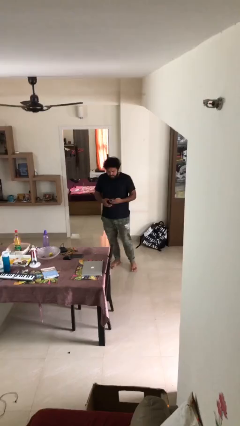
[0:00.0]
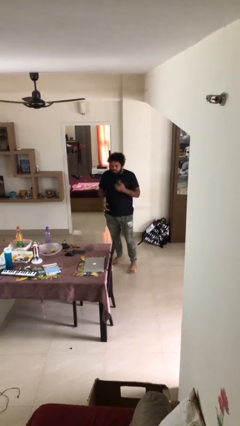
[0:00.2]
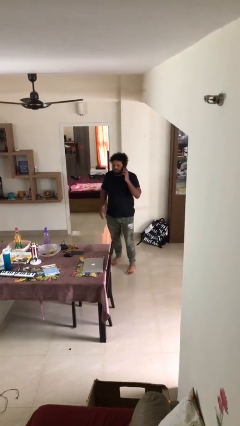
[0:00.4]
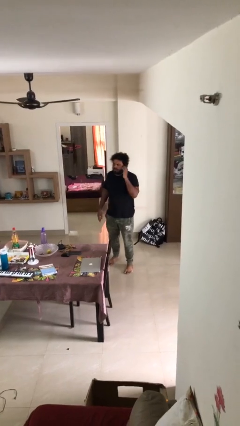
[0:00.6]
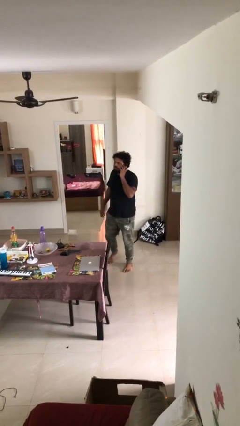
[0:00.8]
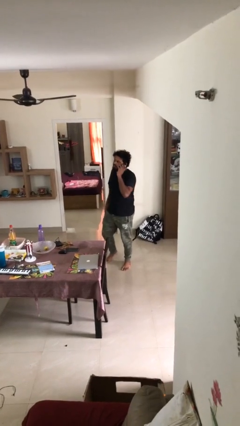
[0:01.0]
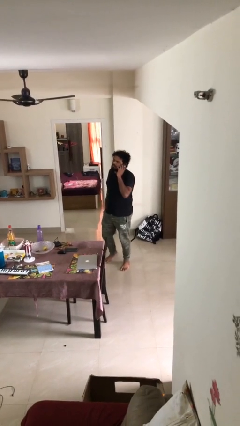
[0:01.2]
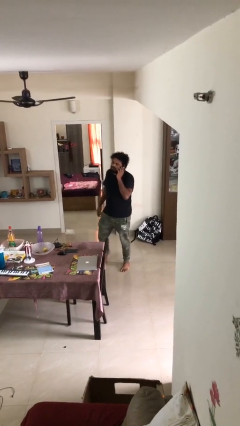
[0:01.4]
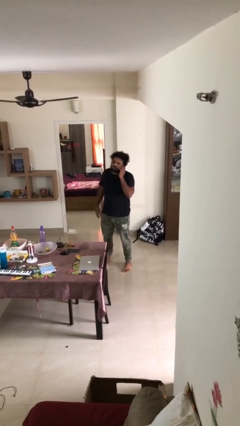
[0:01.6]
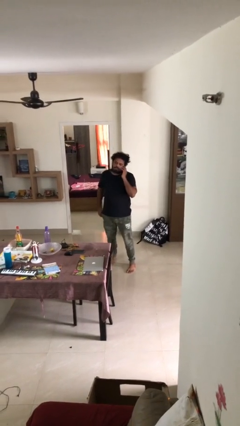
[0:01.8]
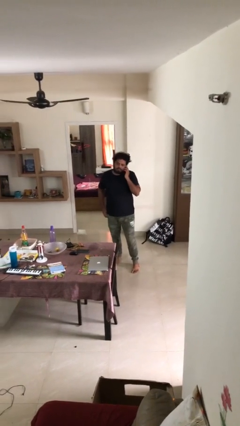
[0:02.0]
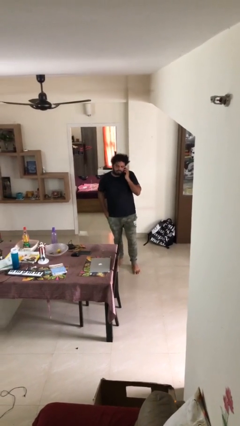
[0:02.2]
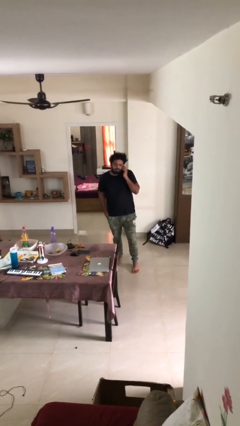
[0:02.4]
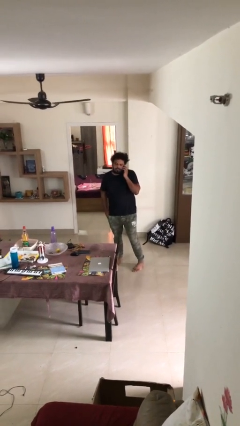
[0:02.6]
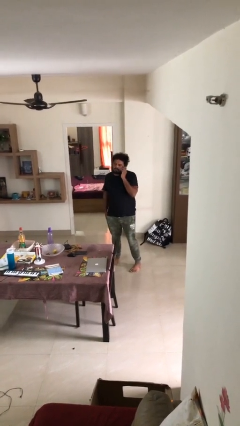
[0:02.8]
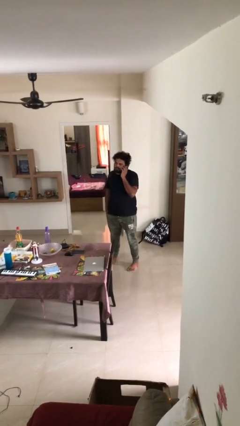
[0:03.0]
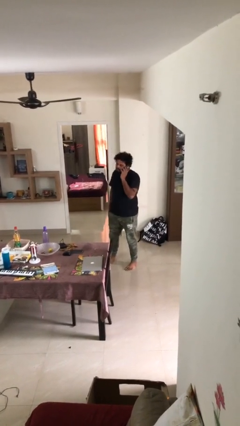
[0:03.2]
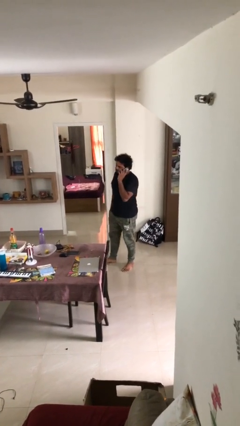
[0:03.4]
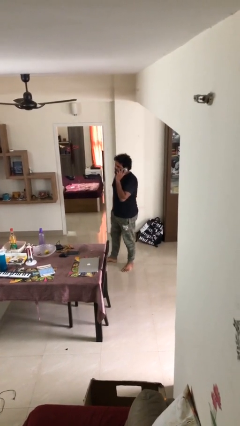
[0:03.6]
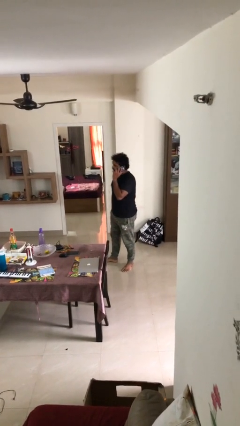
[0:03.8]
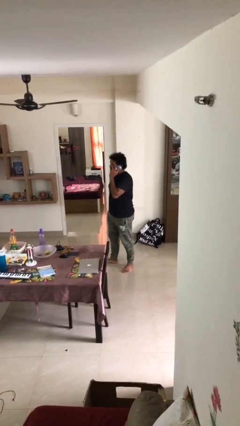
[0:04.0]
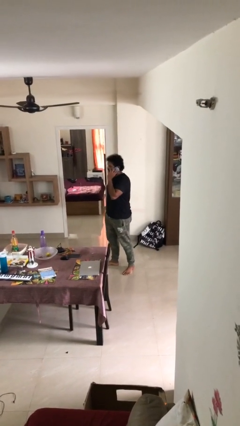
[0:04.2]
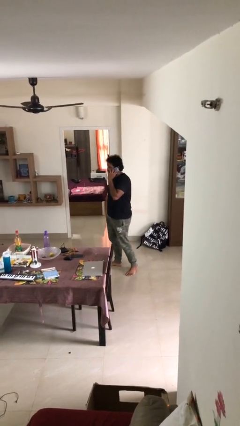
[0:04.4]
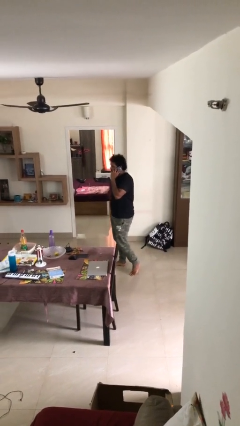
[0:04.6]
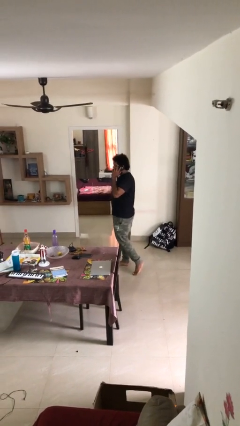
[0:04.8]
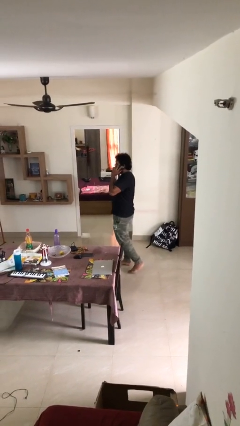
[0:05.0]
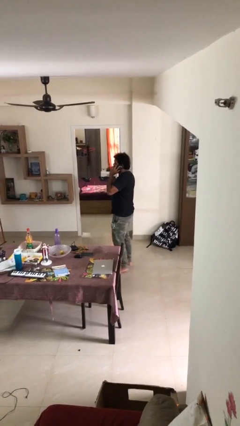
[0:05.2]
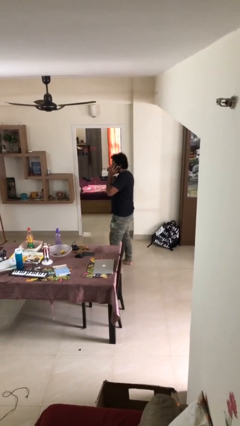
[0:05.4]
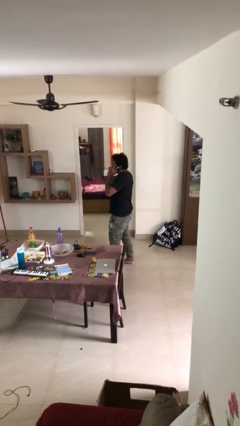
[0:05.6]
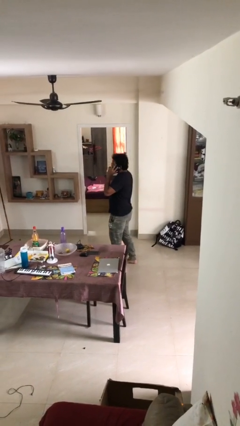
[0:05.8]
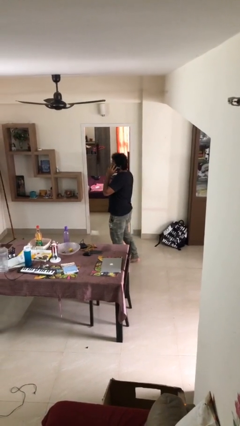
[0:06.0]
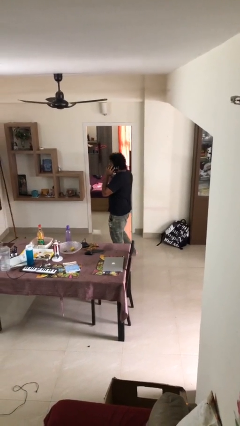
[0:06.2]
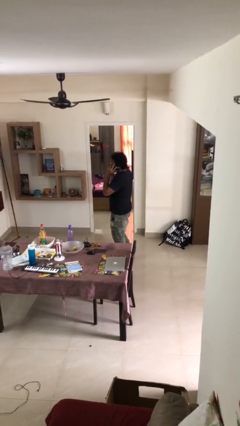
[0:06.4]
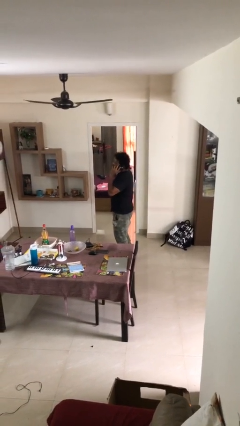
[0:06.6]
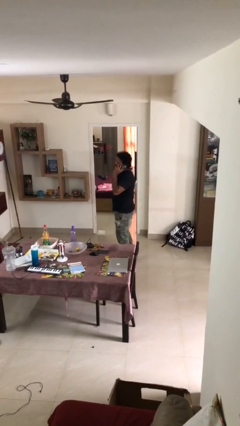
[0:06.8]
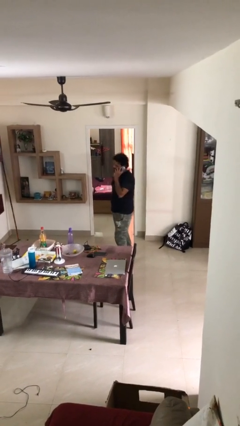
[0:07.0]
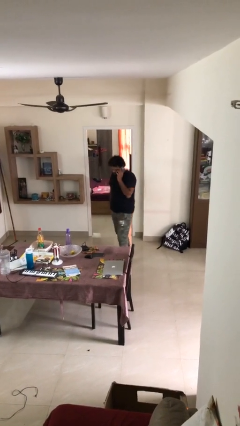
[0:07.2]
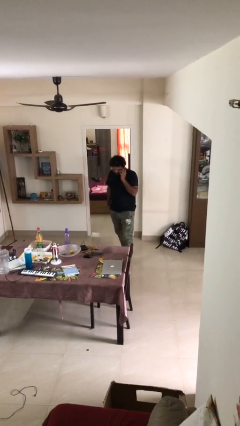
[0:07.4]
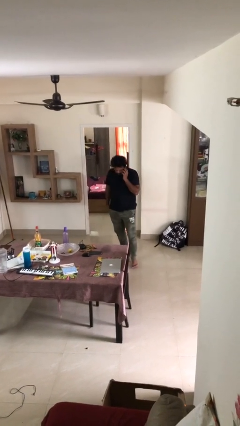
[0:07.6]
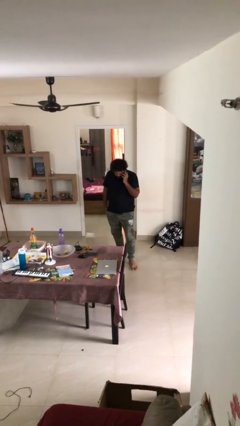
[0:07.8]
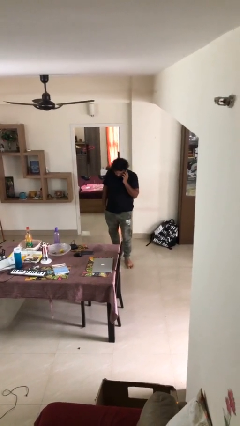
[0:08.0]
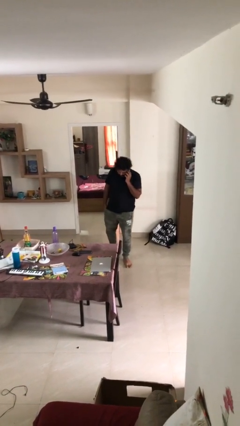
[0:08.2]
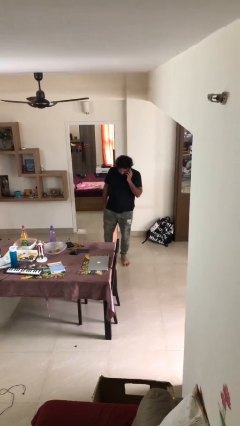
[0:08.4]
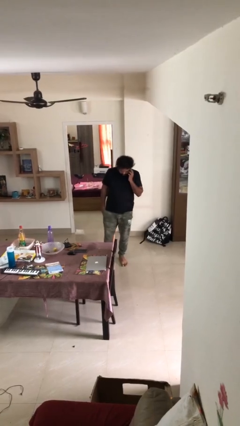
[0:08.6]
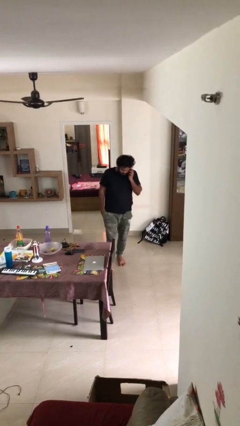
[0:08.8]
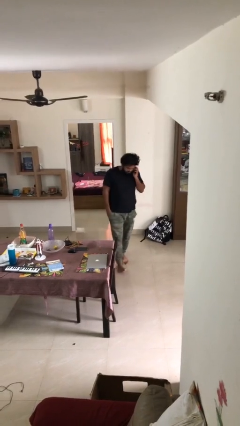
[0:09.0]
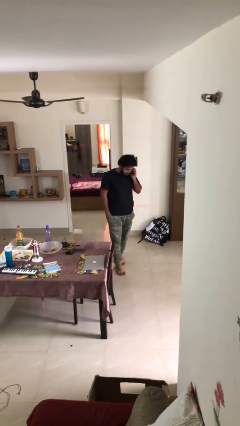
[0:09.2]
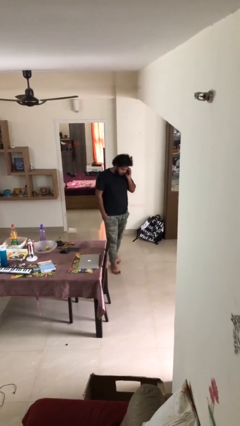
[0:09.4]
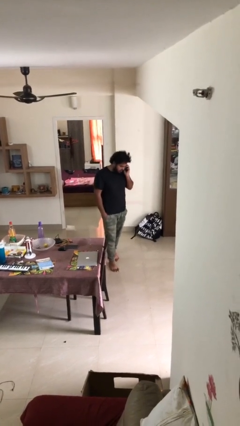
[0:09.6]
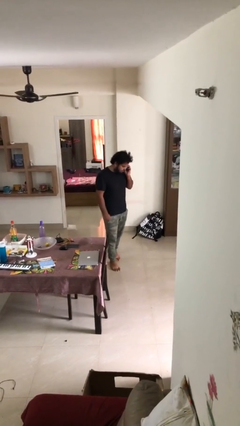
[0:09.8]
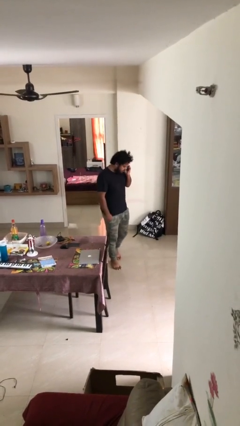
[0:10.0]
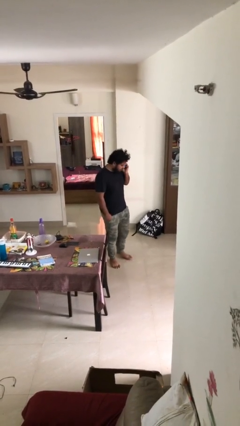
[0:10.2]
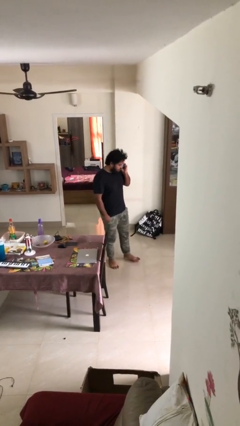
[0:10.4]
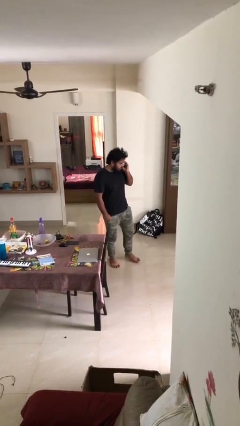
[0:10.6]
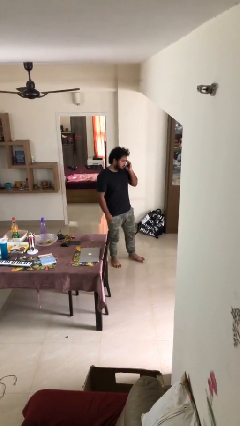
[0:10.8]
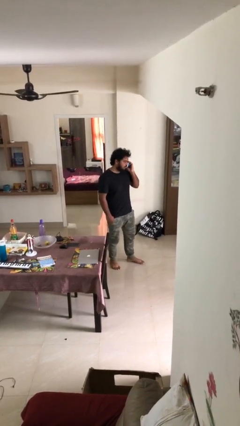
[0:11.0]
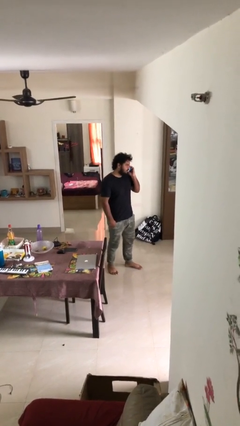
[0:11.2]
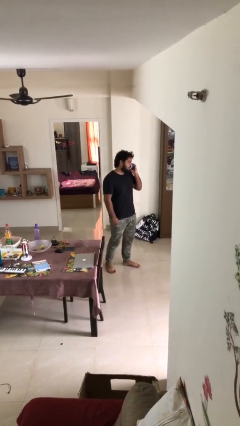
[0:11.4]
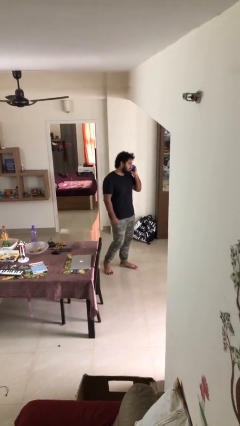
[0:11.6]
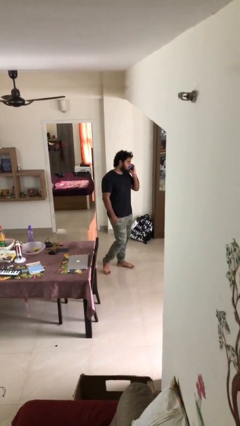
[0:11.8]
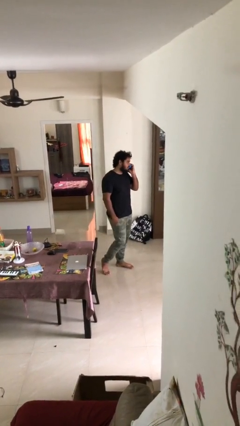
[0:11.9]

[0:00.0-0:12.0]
person talks on phone

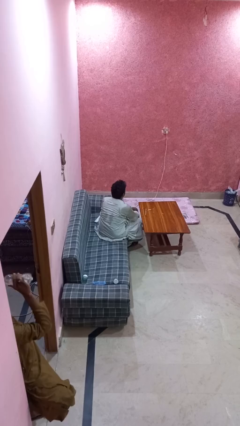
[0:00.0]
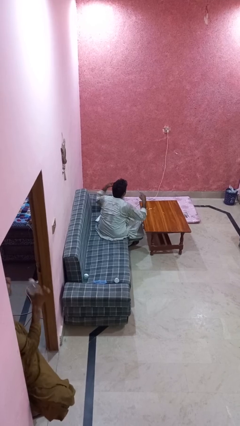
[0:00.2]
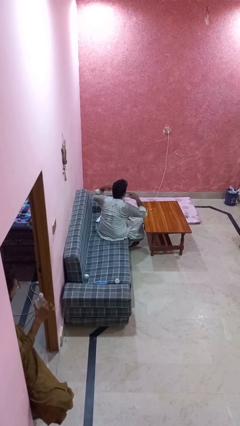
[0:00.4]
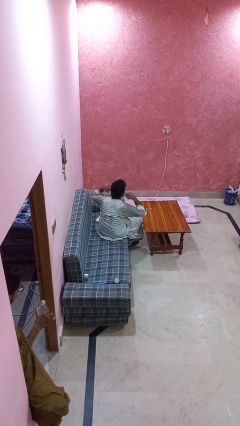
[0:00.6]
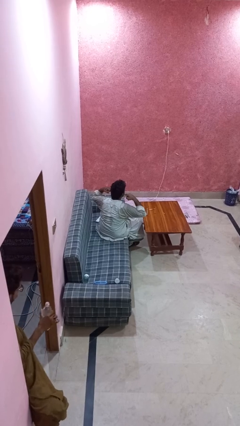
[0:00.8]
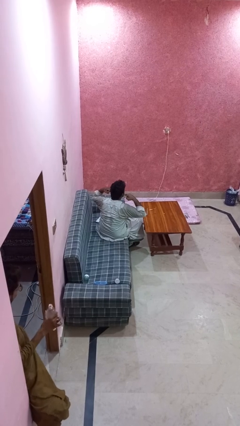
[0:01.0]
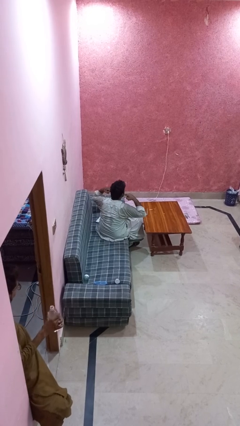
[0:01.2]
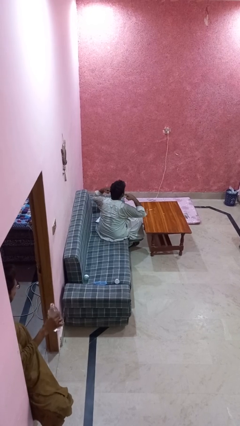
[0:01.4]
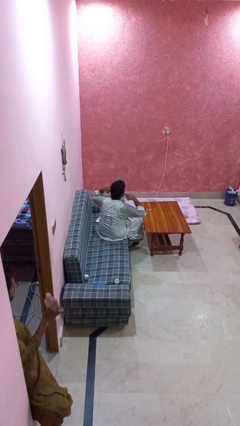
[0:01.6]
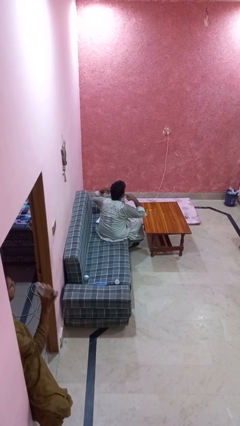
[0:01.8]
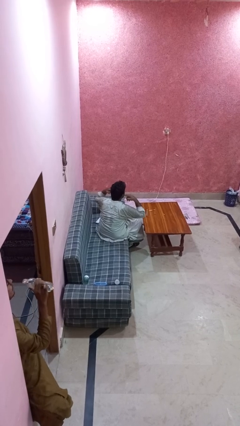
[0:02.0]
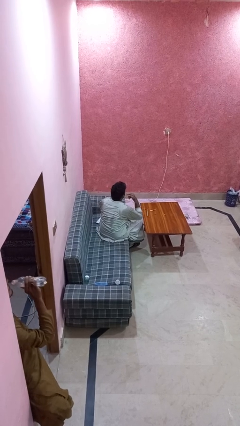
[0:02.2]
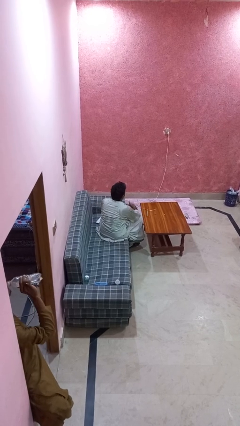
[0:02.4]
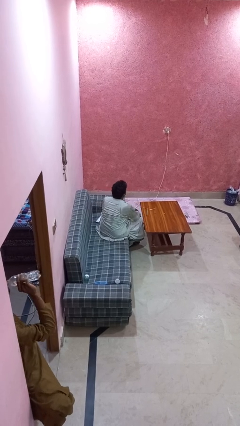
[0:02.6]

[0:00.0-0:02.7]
person puts fingers in ear

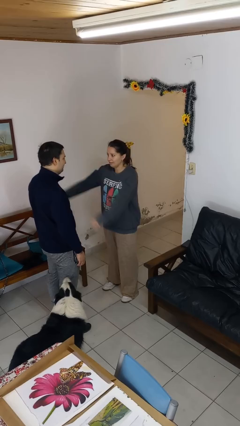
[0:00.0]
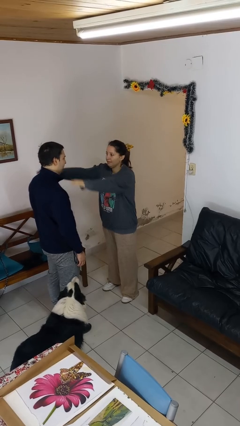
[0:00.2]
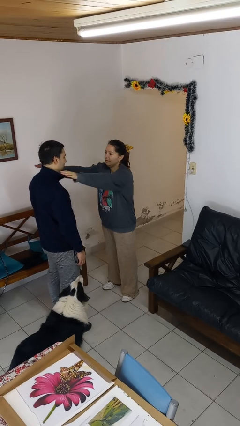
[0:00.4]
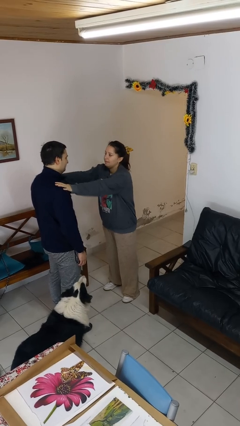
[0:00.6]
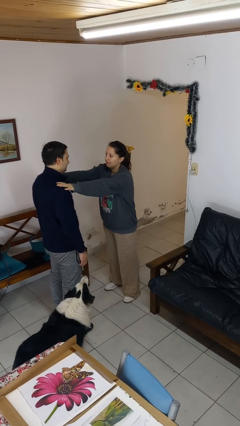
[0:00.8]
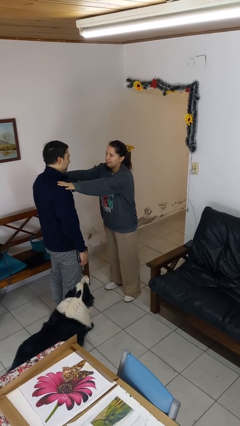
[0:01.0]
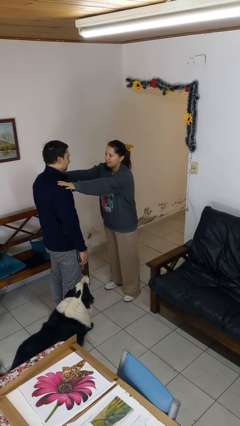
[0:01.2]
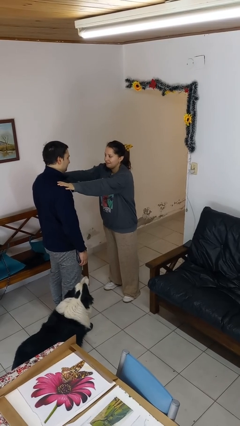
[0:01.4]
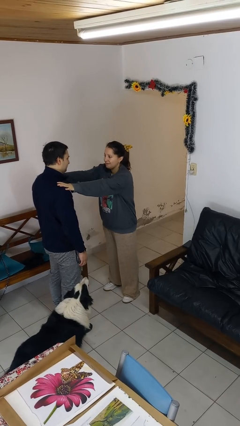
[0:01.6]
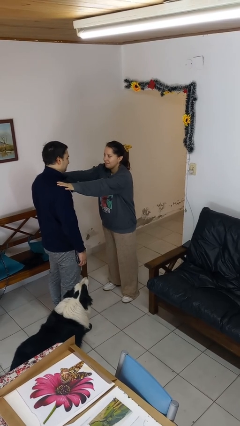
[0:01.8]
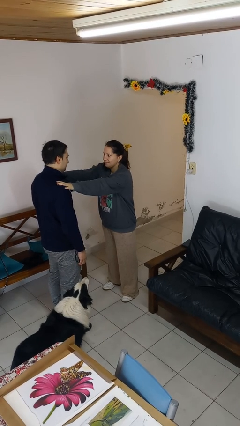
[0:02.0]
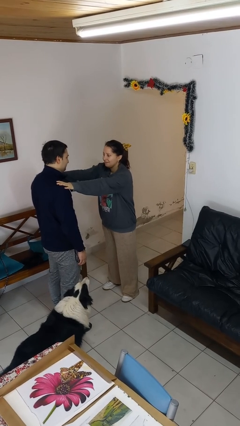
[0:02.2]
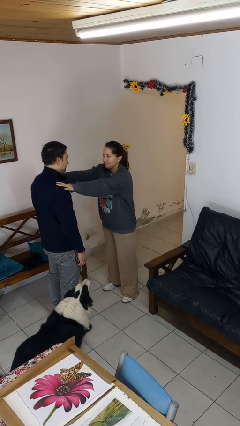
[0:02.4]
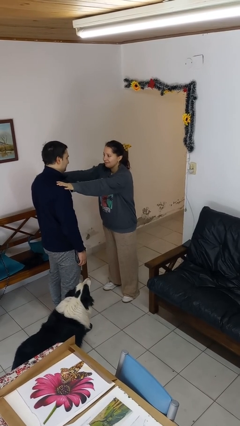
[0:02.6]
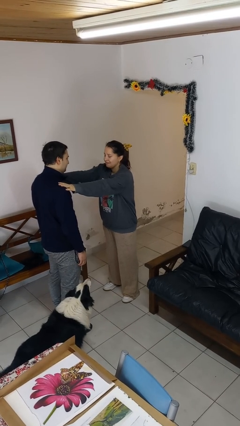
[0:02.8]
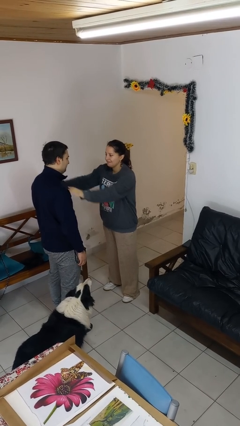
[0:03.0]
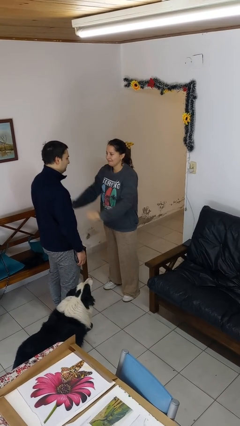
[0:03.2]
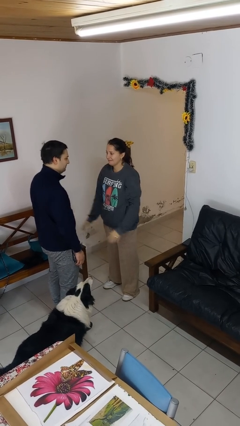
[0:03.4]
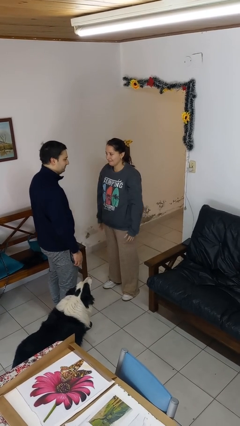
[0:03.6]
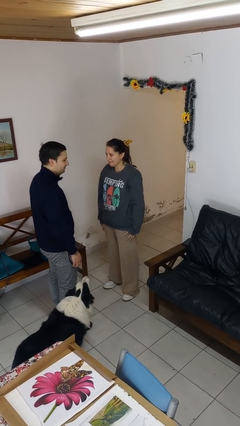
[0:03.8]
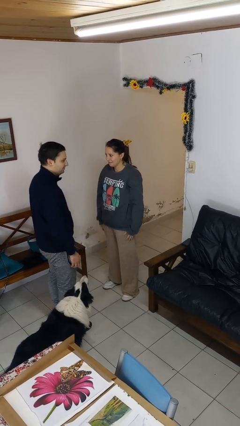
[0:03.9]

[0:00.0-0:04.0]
person pounds shoulders of person
